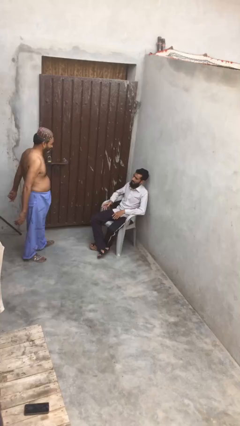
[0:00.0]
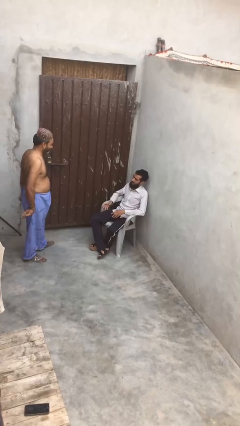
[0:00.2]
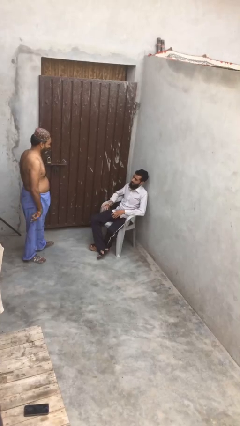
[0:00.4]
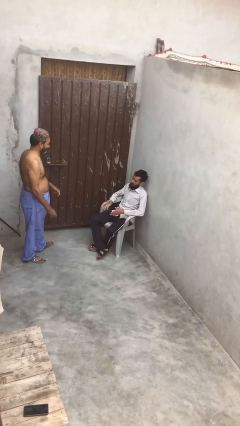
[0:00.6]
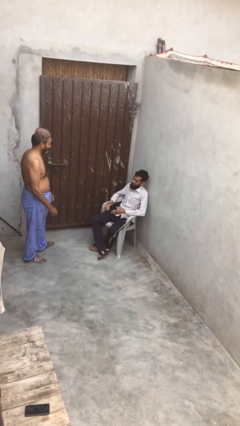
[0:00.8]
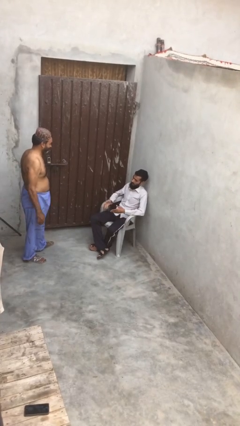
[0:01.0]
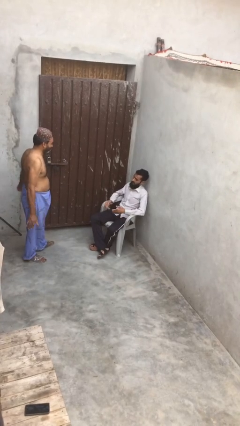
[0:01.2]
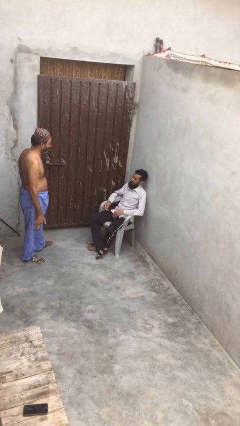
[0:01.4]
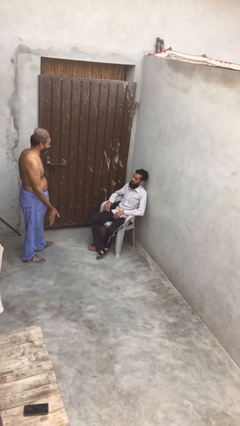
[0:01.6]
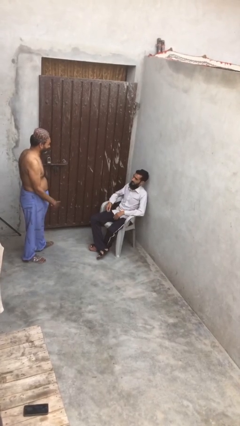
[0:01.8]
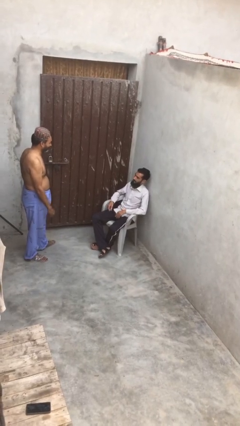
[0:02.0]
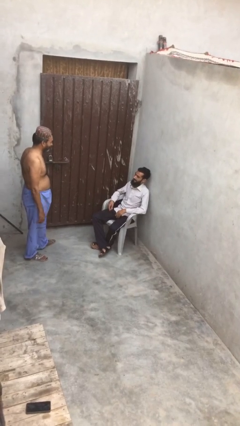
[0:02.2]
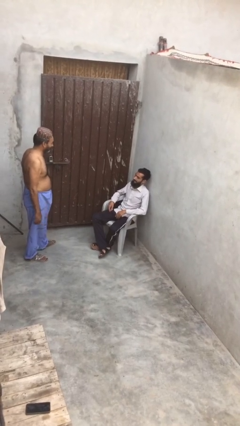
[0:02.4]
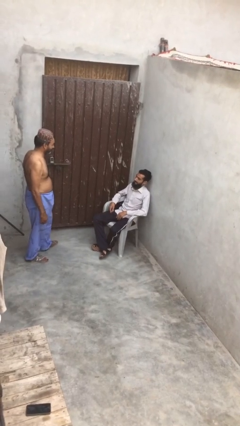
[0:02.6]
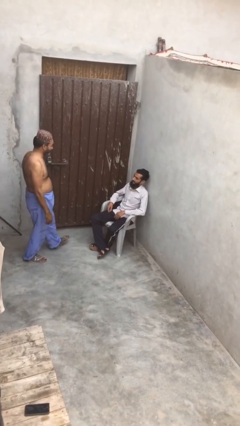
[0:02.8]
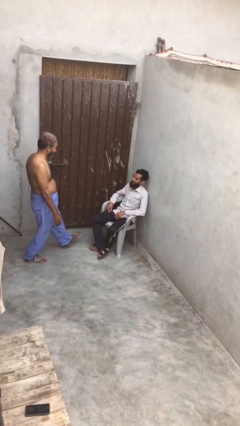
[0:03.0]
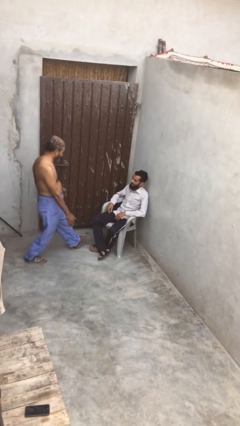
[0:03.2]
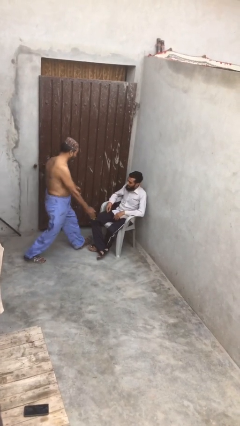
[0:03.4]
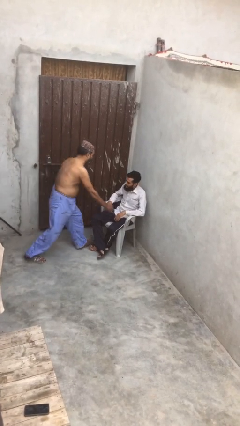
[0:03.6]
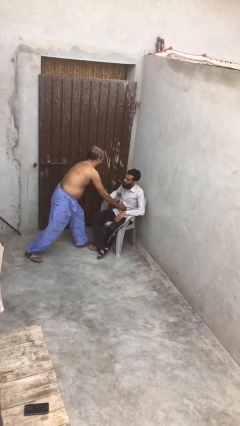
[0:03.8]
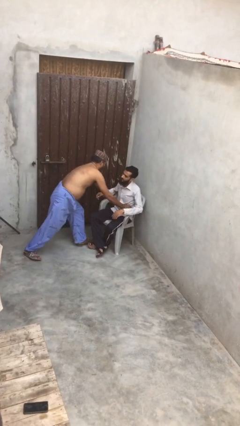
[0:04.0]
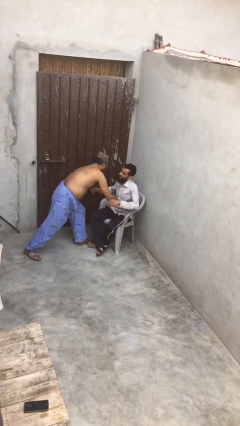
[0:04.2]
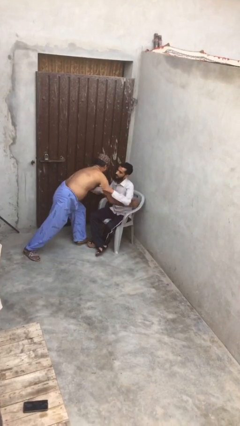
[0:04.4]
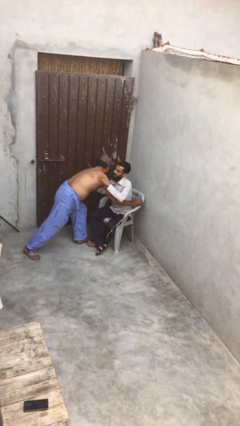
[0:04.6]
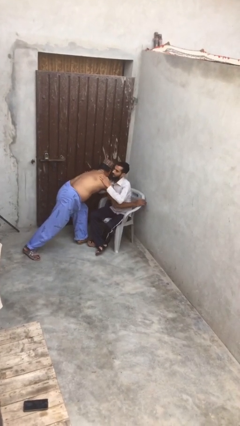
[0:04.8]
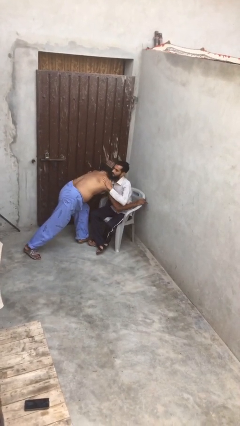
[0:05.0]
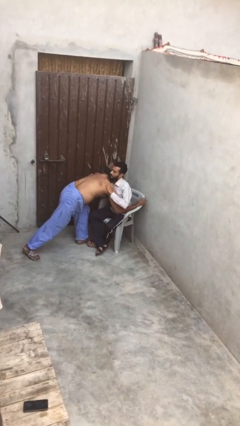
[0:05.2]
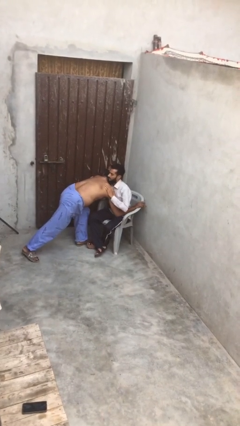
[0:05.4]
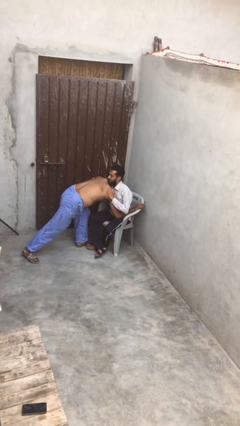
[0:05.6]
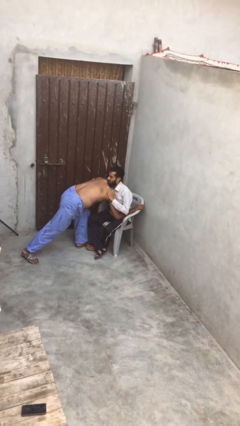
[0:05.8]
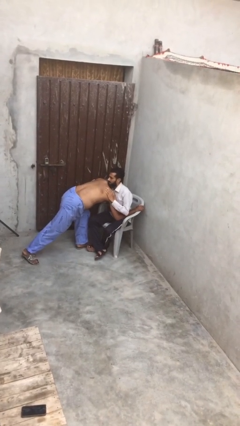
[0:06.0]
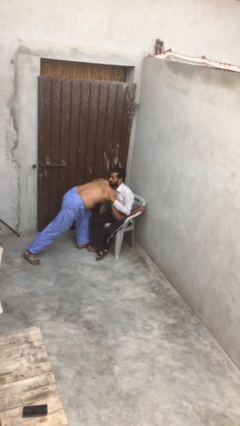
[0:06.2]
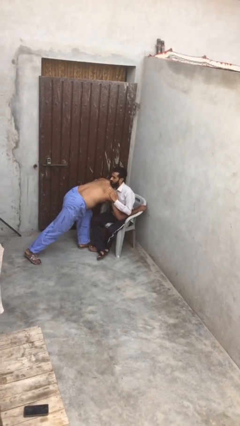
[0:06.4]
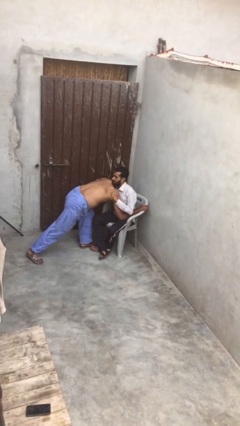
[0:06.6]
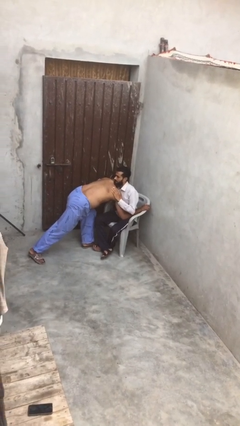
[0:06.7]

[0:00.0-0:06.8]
person embraces person

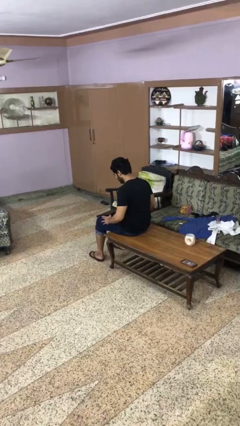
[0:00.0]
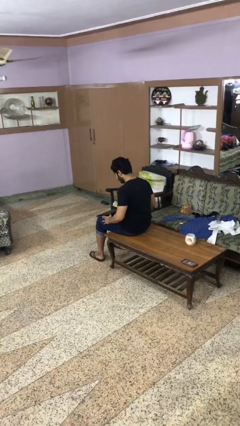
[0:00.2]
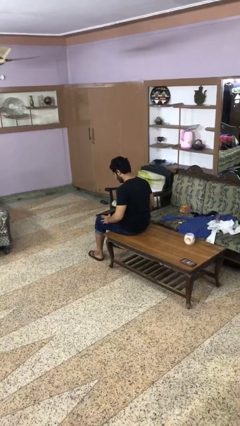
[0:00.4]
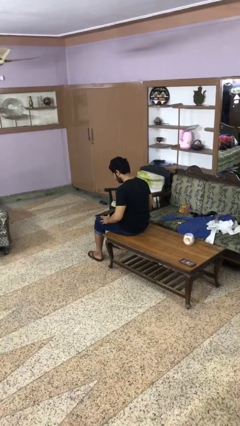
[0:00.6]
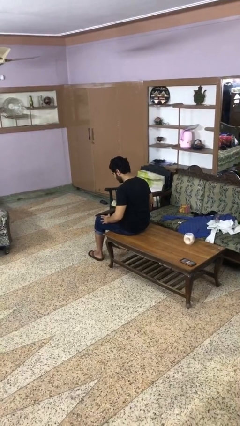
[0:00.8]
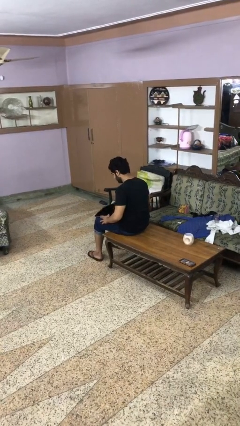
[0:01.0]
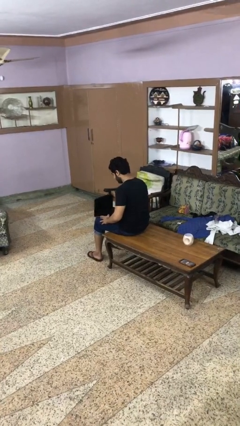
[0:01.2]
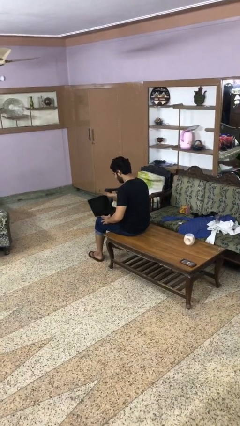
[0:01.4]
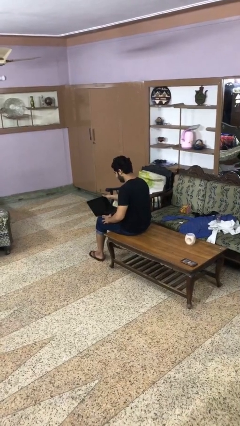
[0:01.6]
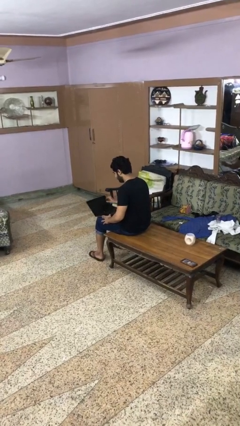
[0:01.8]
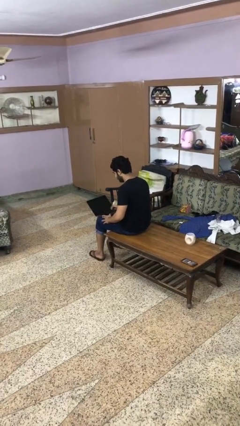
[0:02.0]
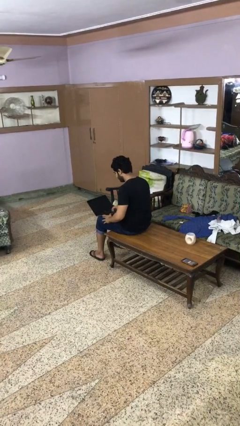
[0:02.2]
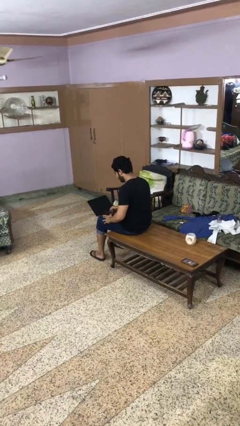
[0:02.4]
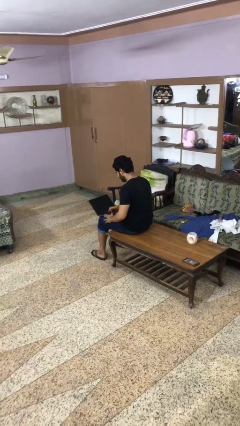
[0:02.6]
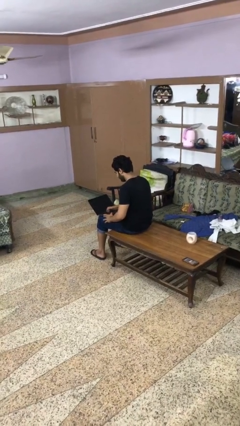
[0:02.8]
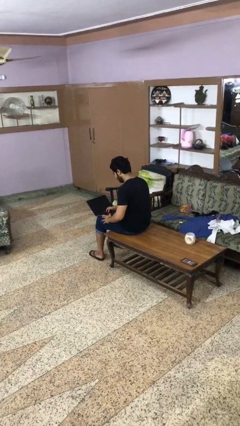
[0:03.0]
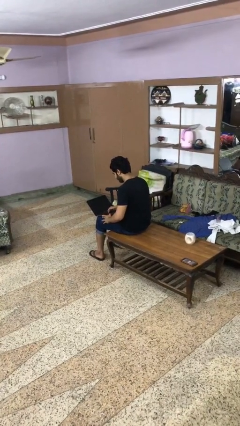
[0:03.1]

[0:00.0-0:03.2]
person opens laptop

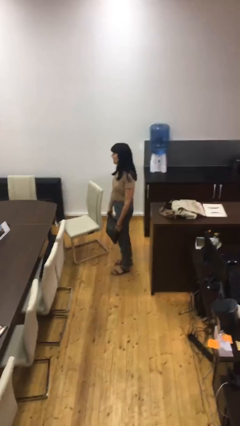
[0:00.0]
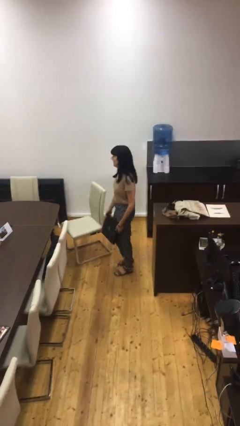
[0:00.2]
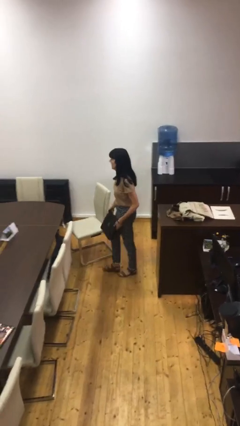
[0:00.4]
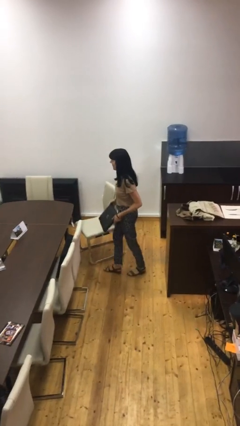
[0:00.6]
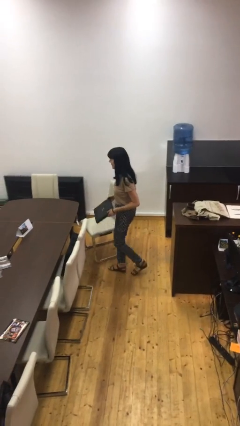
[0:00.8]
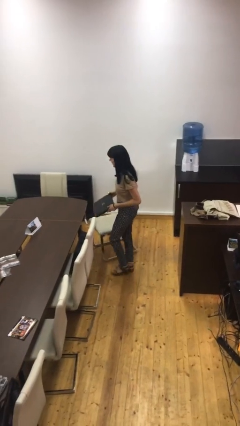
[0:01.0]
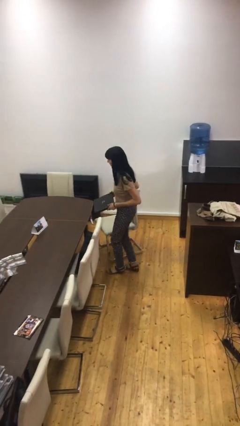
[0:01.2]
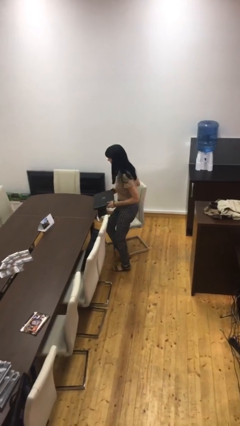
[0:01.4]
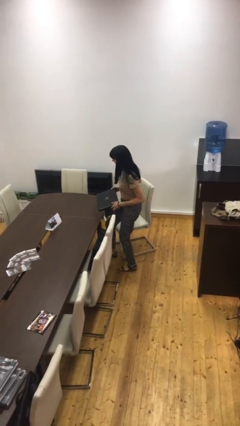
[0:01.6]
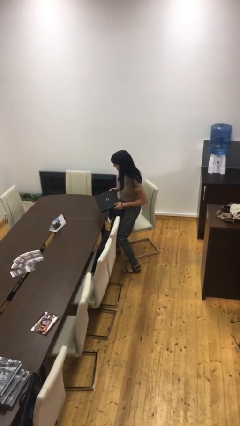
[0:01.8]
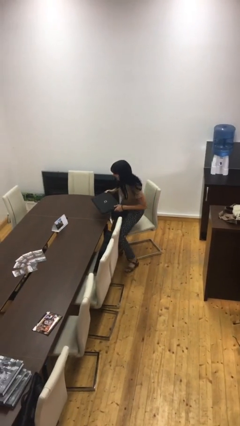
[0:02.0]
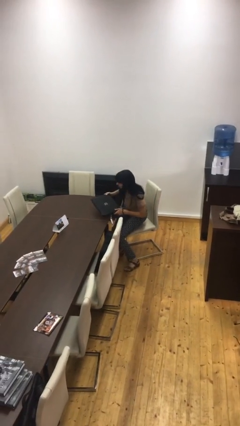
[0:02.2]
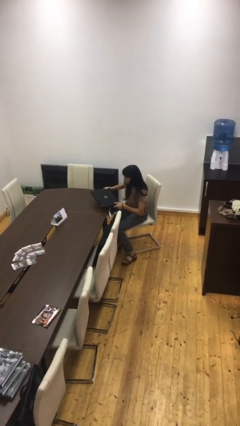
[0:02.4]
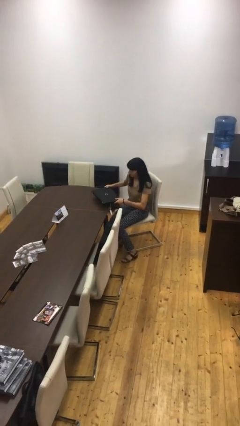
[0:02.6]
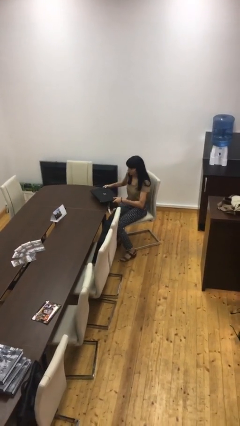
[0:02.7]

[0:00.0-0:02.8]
person sits down

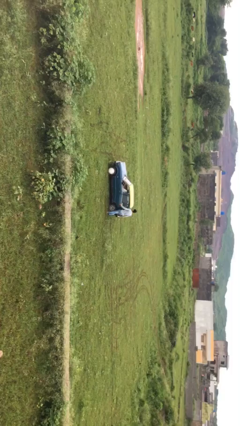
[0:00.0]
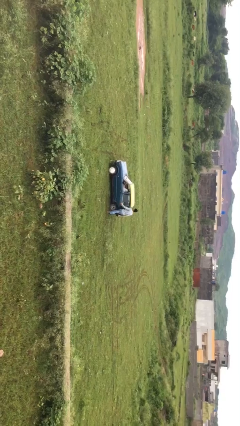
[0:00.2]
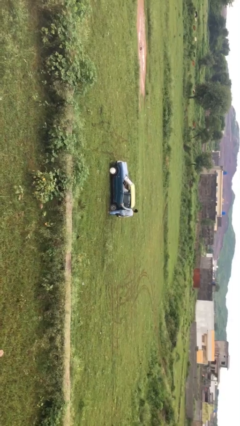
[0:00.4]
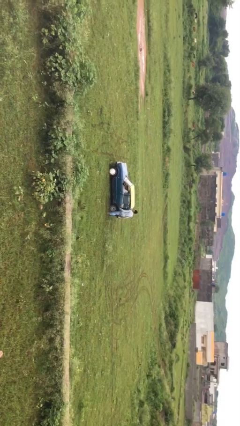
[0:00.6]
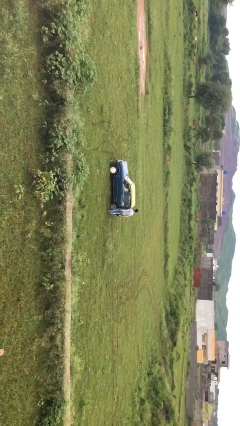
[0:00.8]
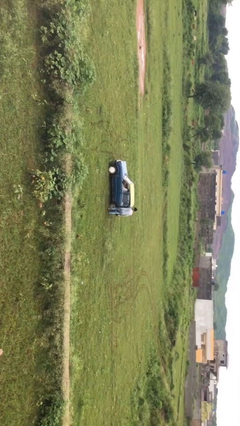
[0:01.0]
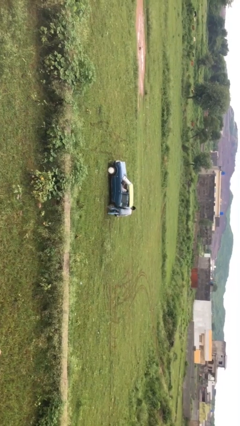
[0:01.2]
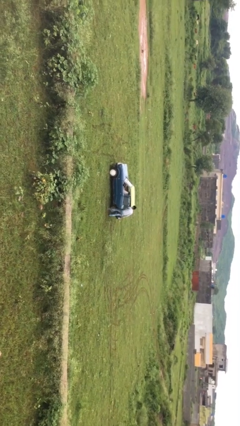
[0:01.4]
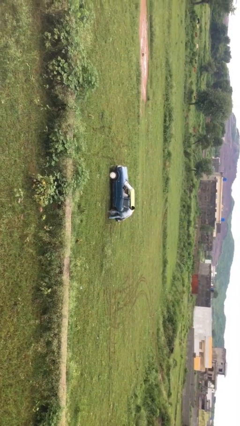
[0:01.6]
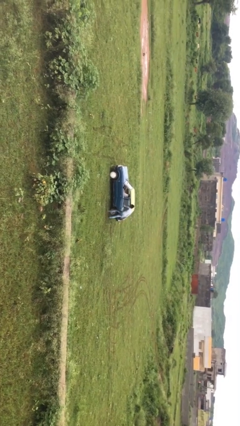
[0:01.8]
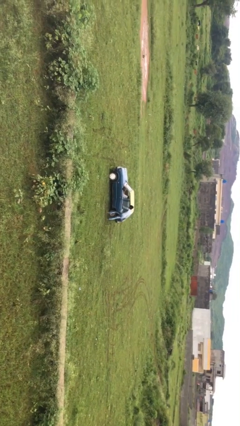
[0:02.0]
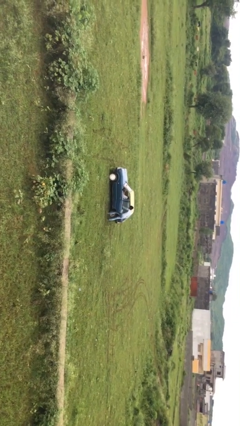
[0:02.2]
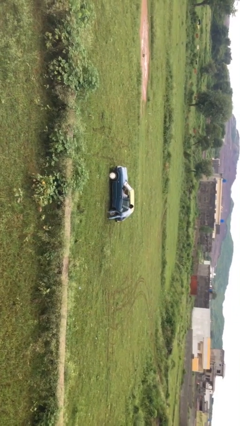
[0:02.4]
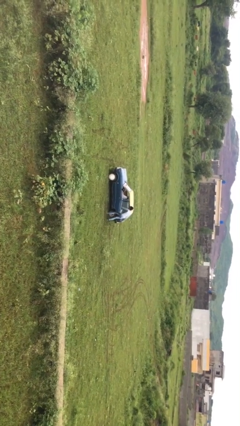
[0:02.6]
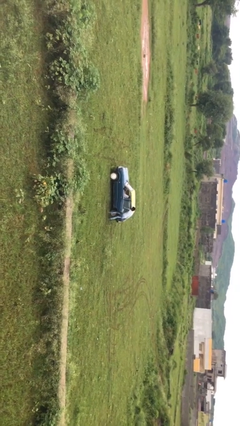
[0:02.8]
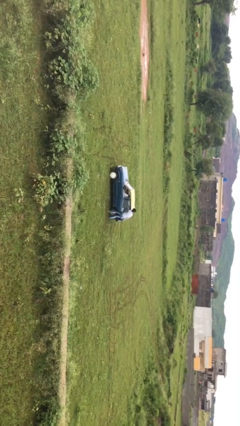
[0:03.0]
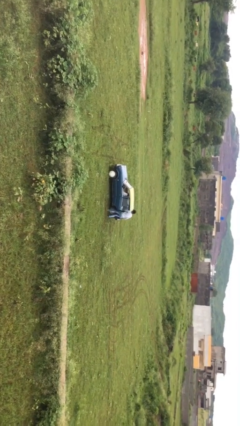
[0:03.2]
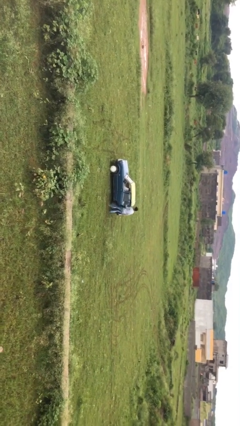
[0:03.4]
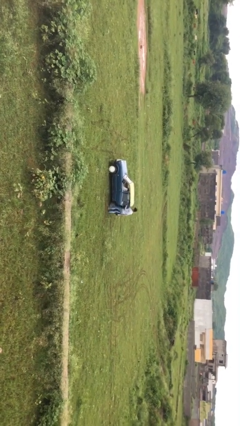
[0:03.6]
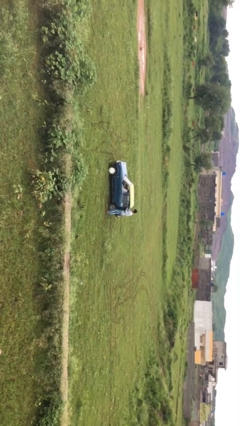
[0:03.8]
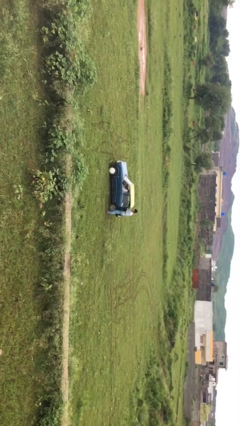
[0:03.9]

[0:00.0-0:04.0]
person unloads car

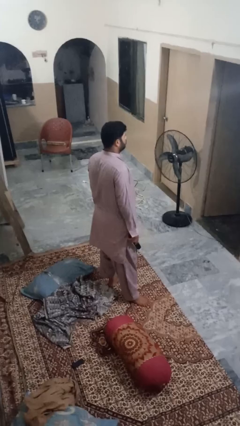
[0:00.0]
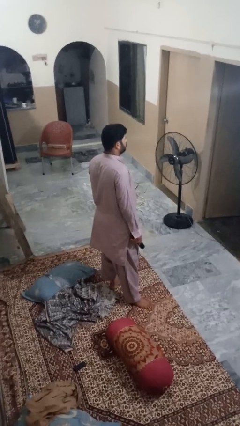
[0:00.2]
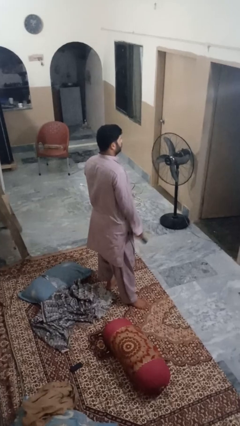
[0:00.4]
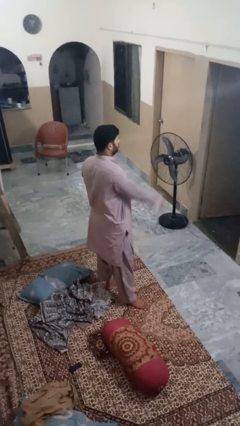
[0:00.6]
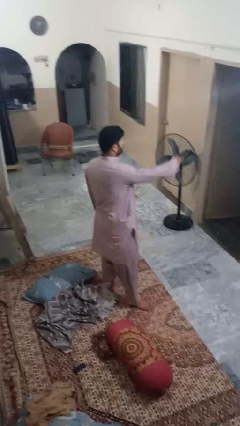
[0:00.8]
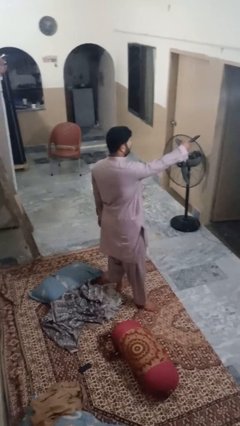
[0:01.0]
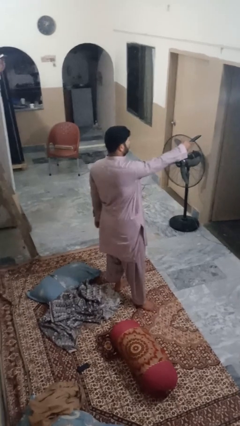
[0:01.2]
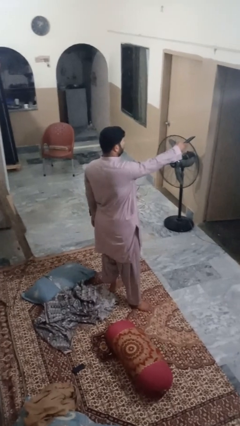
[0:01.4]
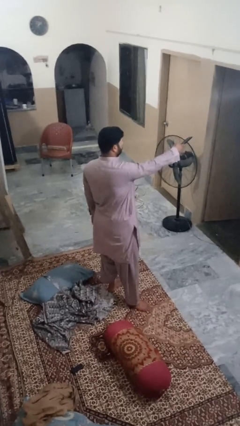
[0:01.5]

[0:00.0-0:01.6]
person uses television remote
